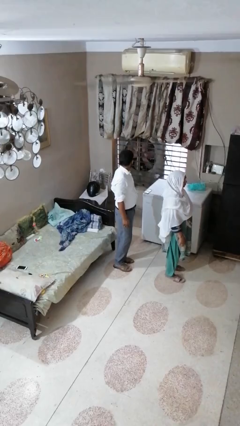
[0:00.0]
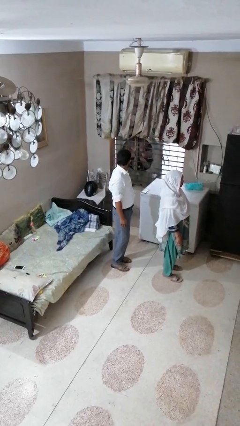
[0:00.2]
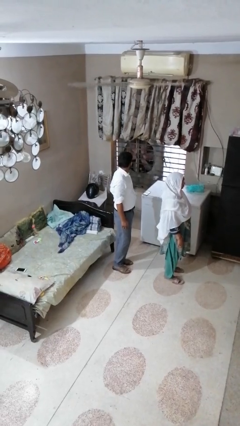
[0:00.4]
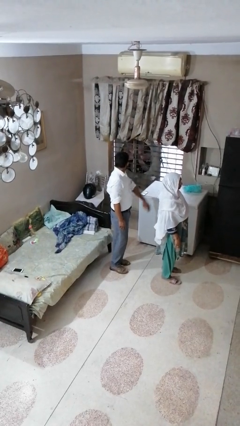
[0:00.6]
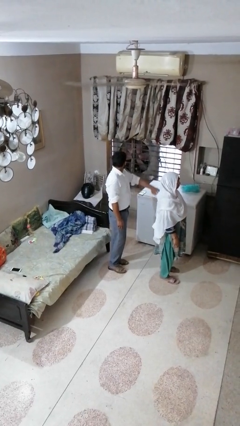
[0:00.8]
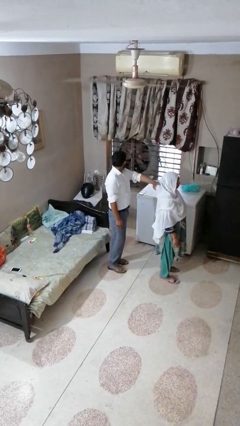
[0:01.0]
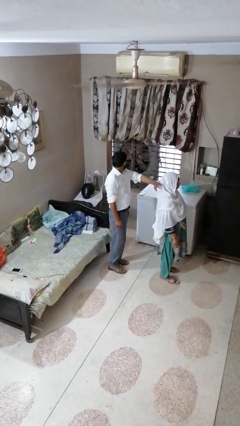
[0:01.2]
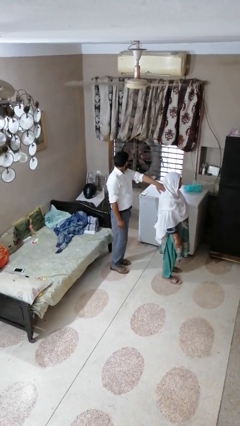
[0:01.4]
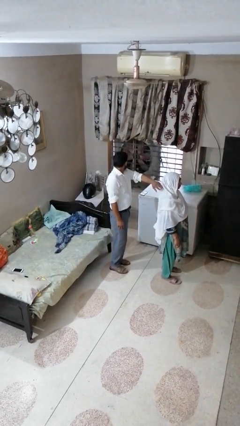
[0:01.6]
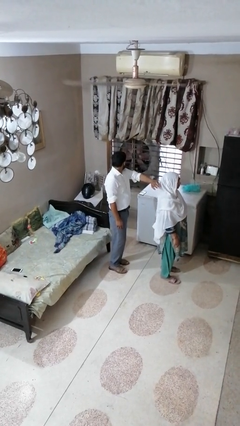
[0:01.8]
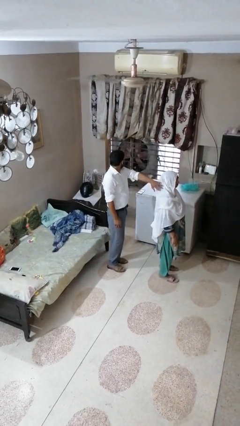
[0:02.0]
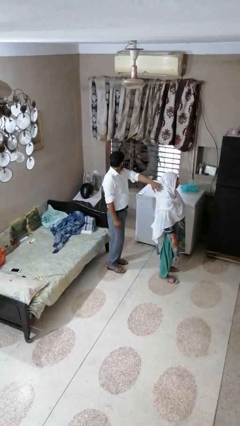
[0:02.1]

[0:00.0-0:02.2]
person touches back of person

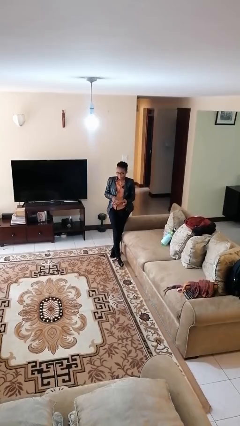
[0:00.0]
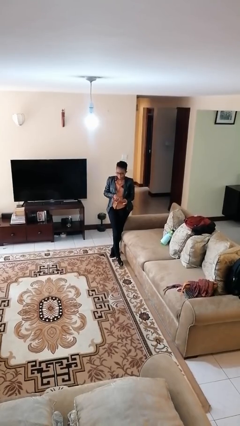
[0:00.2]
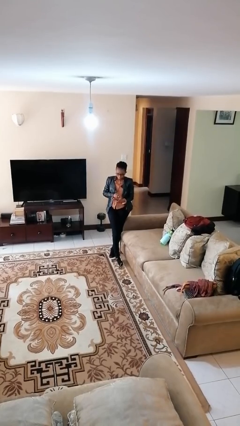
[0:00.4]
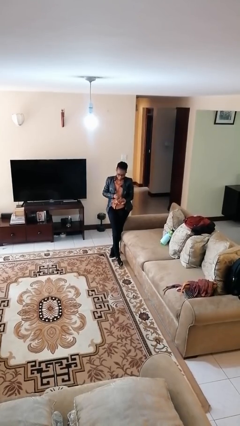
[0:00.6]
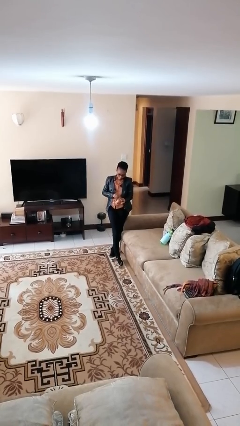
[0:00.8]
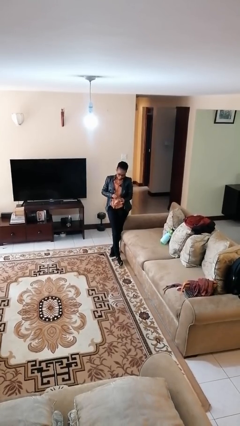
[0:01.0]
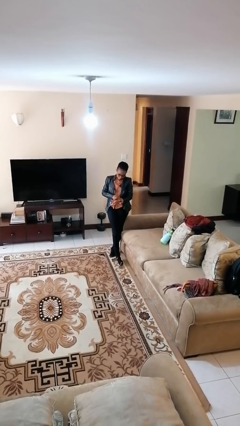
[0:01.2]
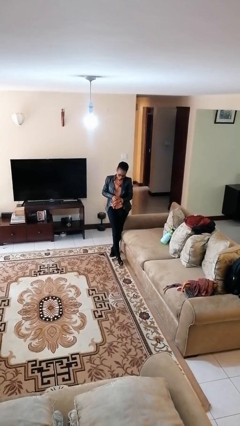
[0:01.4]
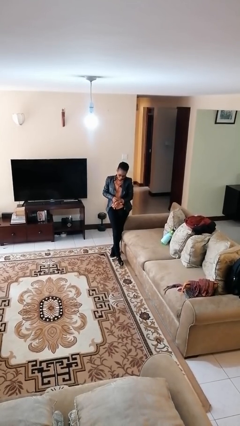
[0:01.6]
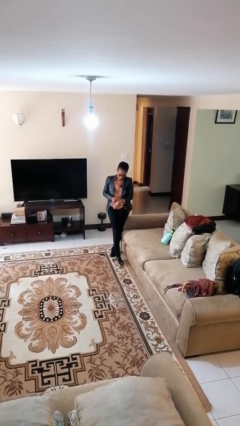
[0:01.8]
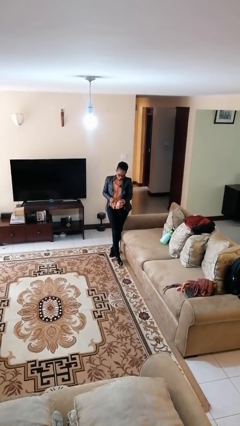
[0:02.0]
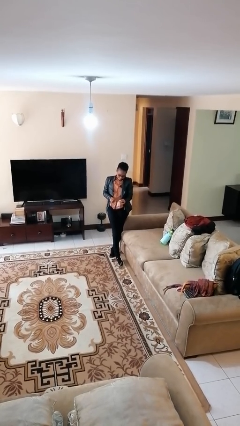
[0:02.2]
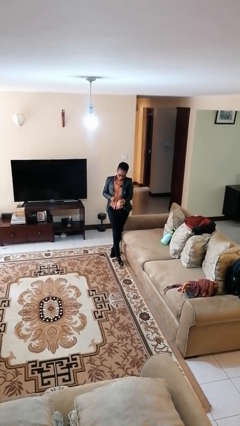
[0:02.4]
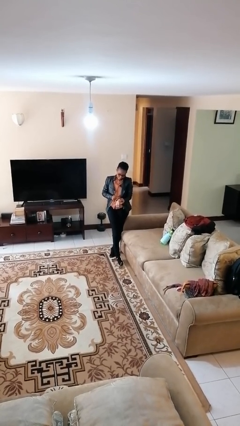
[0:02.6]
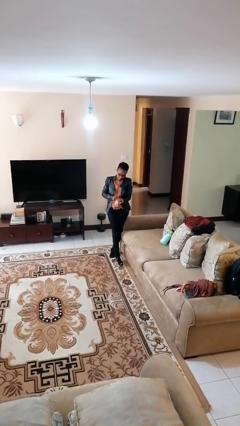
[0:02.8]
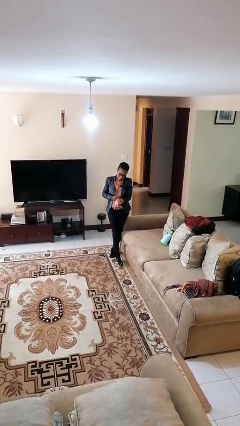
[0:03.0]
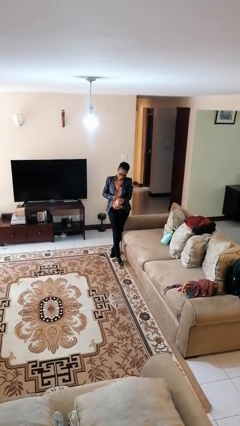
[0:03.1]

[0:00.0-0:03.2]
person puts on wristwatch

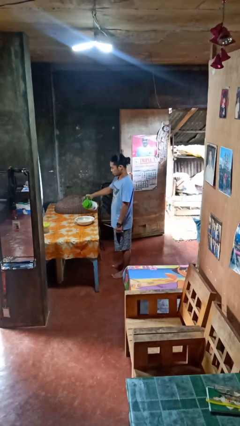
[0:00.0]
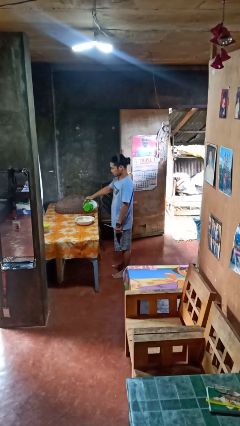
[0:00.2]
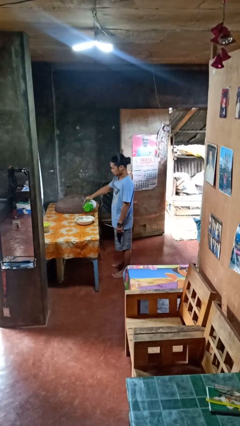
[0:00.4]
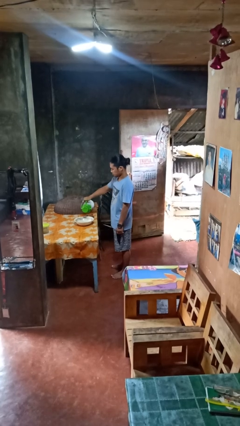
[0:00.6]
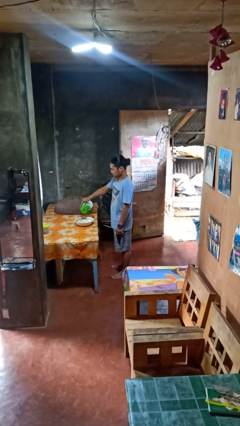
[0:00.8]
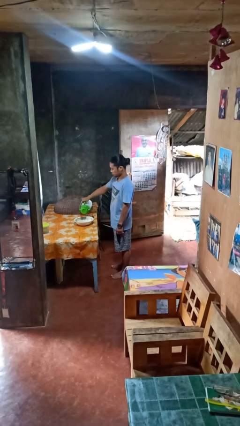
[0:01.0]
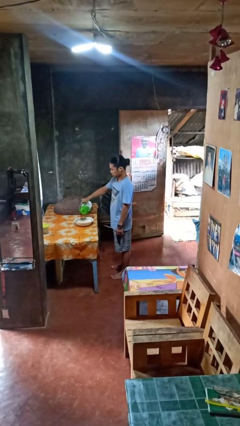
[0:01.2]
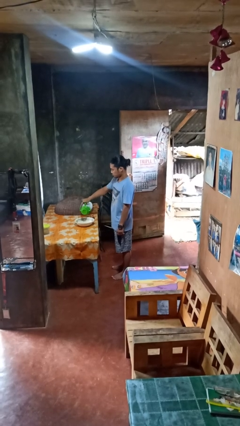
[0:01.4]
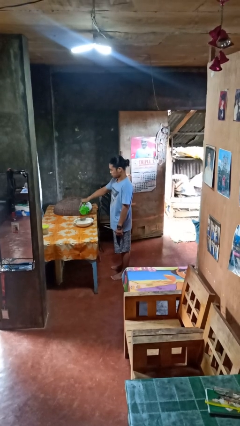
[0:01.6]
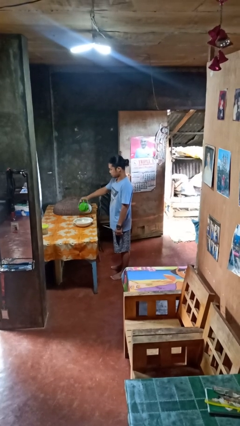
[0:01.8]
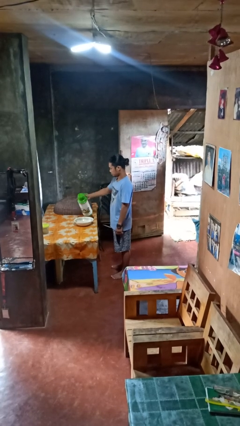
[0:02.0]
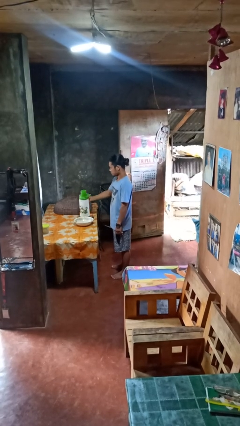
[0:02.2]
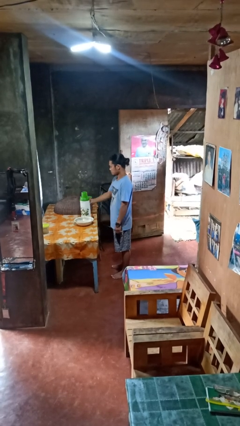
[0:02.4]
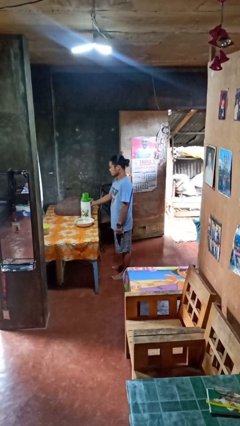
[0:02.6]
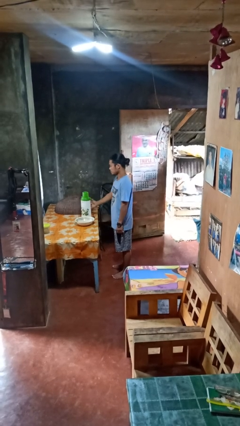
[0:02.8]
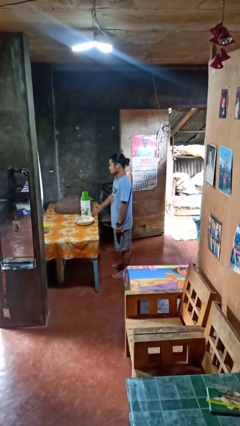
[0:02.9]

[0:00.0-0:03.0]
person pours into bowl

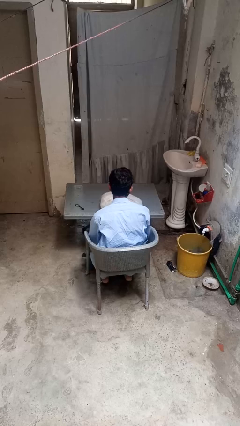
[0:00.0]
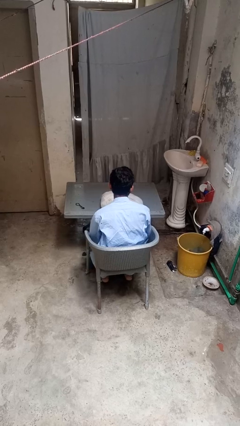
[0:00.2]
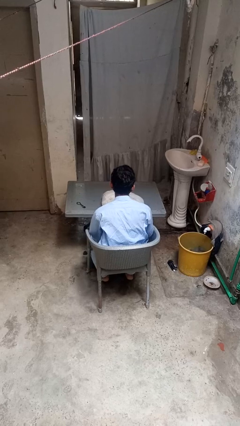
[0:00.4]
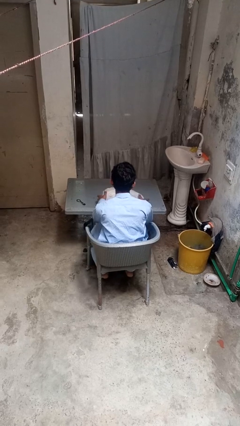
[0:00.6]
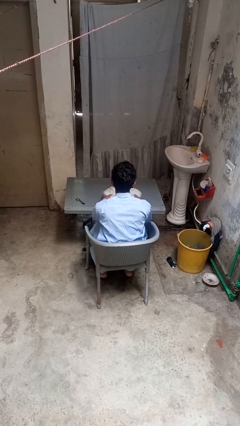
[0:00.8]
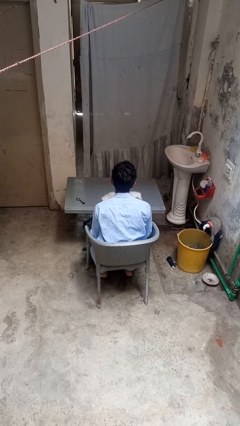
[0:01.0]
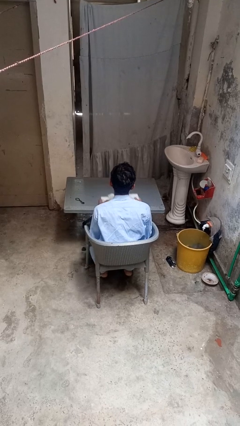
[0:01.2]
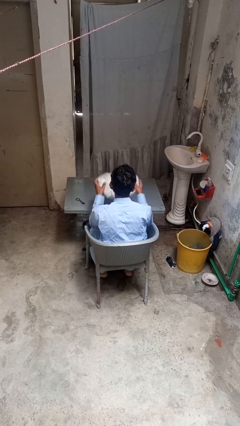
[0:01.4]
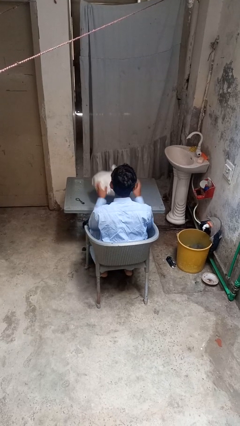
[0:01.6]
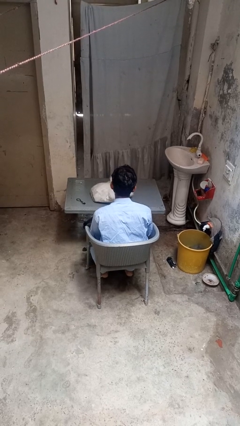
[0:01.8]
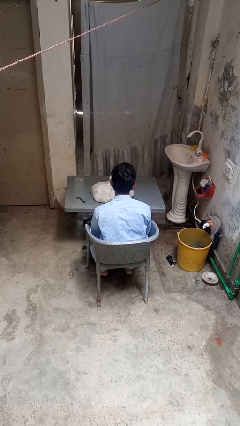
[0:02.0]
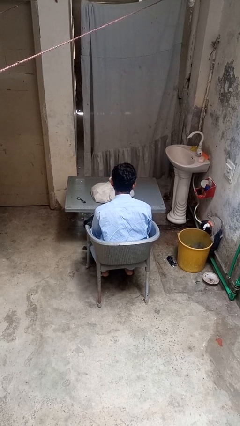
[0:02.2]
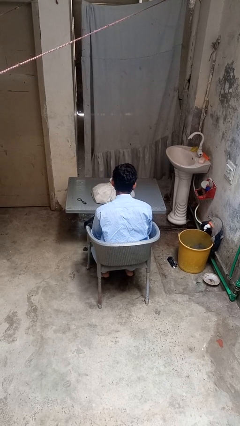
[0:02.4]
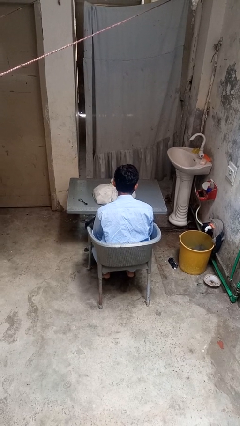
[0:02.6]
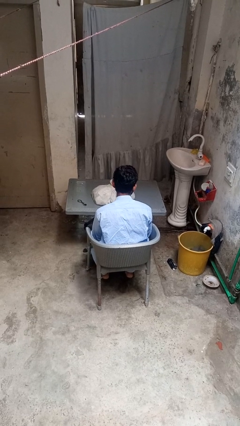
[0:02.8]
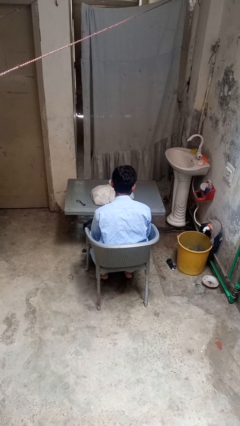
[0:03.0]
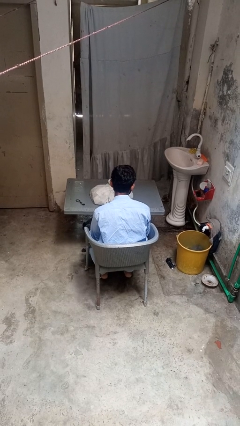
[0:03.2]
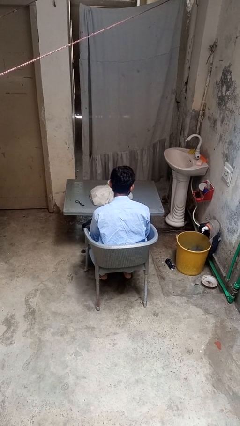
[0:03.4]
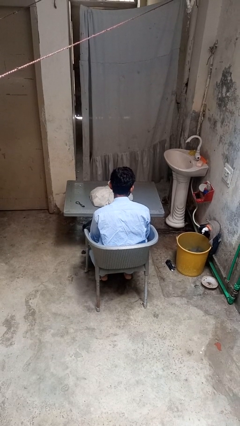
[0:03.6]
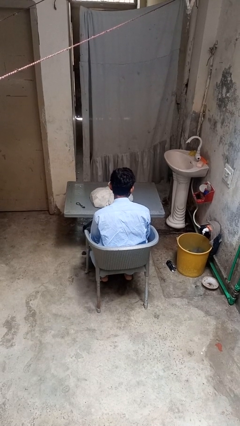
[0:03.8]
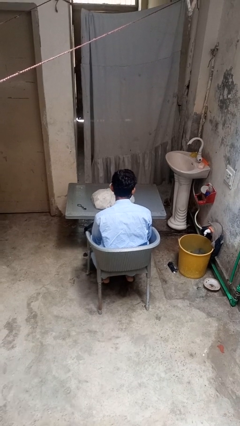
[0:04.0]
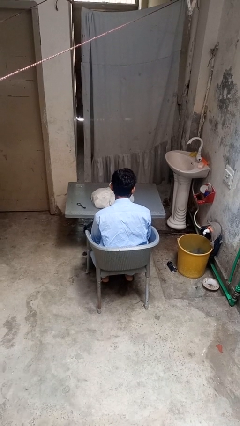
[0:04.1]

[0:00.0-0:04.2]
person throws object on table

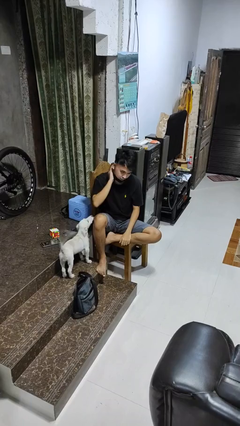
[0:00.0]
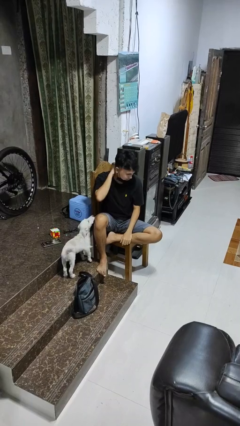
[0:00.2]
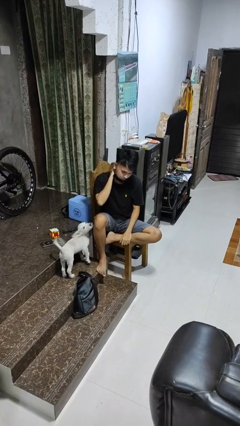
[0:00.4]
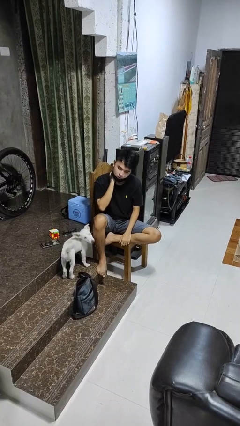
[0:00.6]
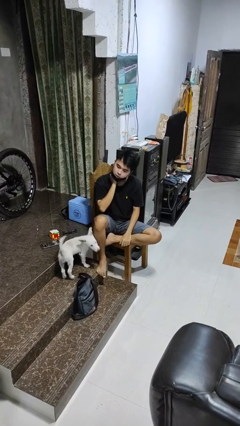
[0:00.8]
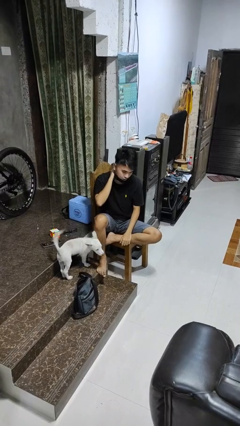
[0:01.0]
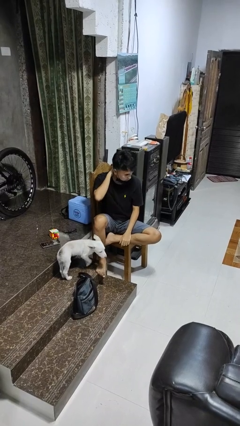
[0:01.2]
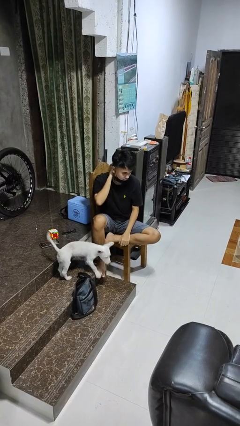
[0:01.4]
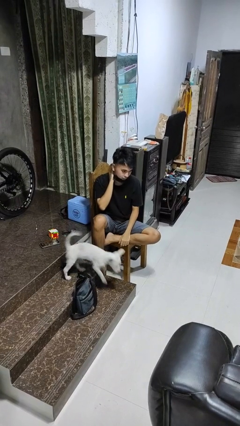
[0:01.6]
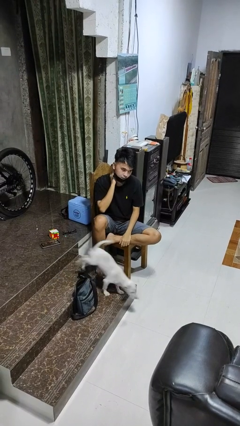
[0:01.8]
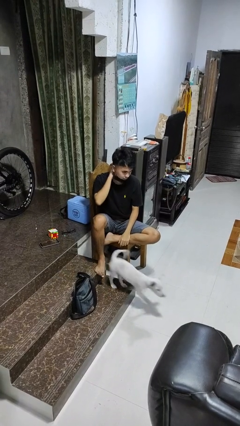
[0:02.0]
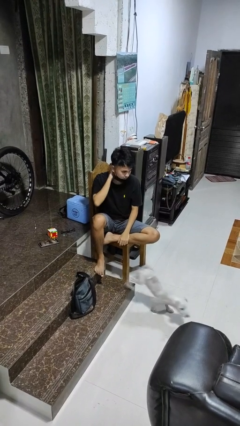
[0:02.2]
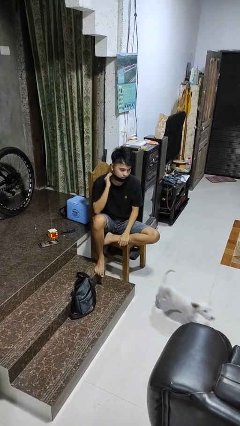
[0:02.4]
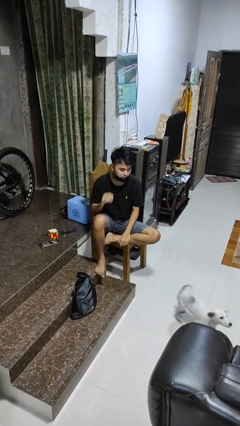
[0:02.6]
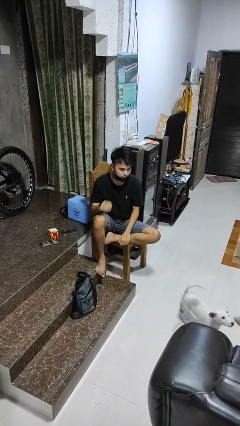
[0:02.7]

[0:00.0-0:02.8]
person rubs neck

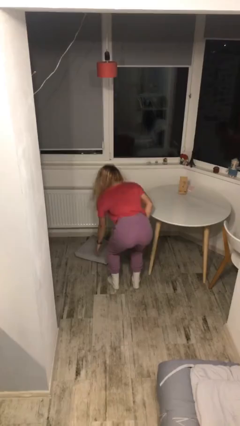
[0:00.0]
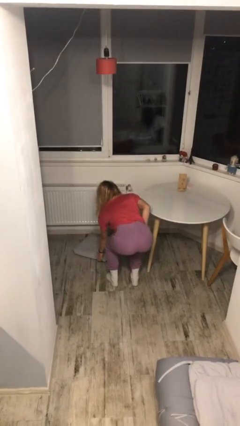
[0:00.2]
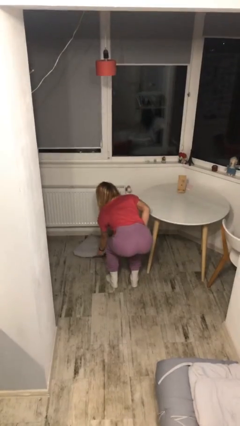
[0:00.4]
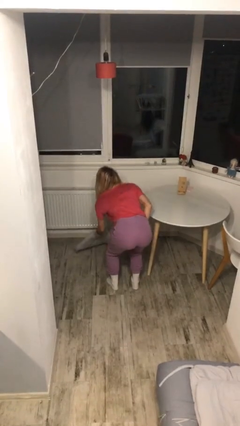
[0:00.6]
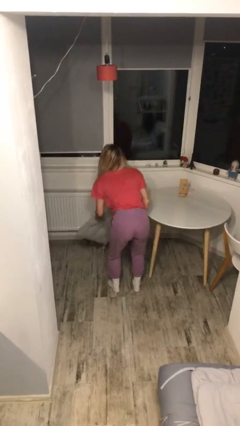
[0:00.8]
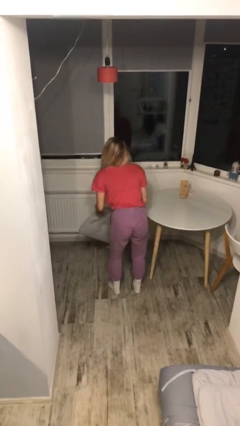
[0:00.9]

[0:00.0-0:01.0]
person picks up object from floor

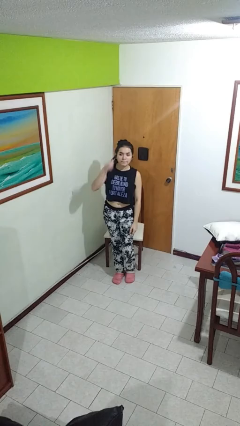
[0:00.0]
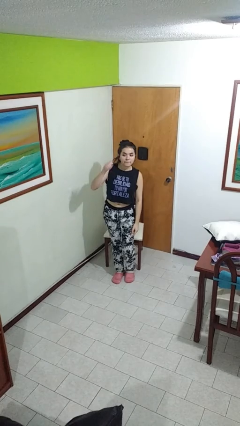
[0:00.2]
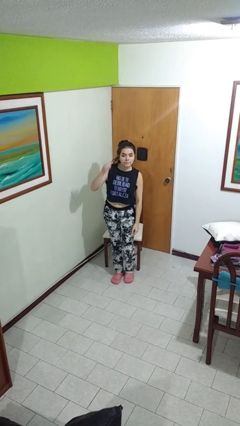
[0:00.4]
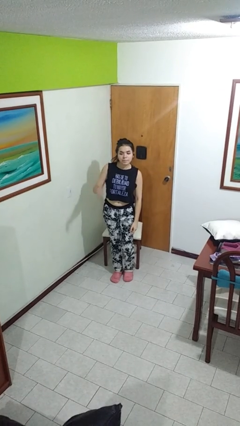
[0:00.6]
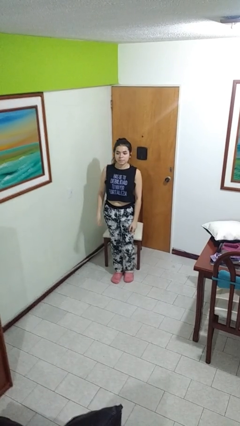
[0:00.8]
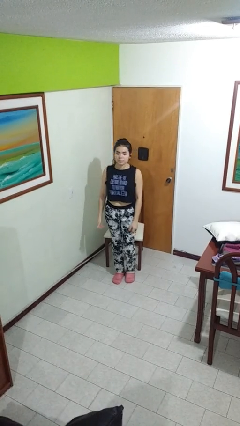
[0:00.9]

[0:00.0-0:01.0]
person gestures behind me
